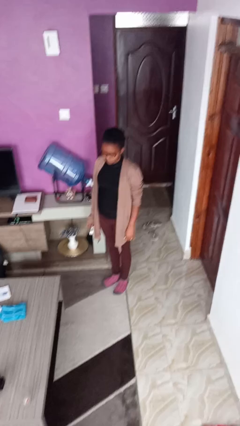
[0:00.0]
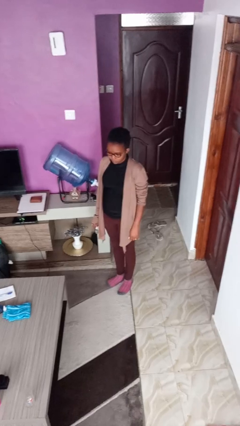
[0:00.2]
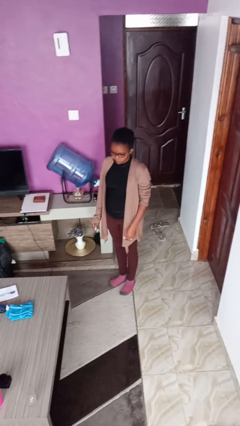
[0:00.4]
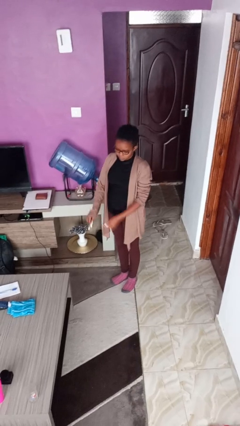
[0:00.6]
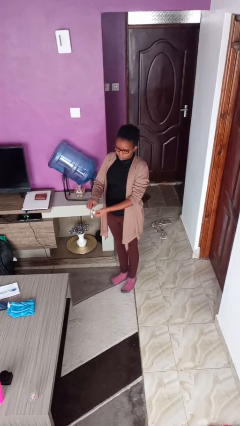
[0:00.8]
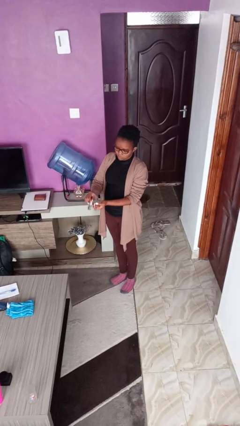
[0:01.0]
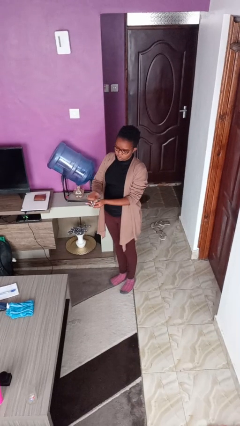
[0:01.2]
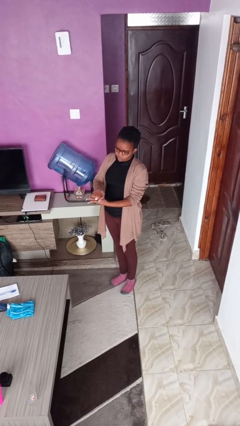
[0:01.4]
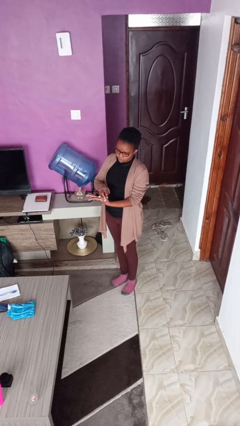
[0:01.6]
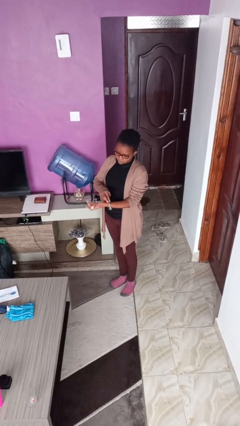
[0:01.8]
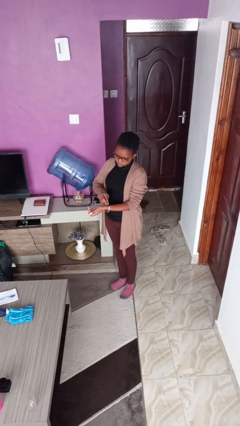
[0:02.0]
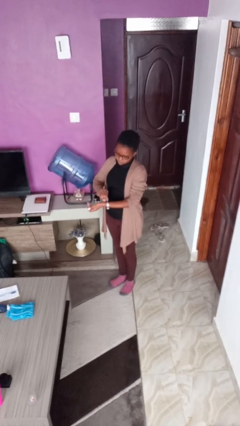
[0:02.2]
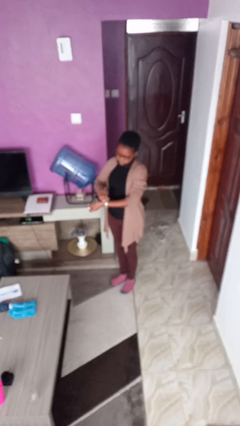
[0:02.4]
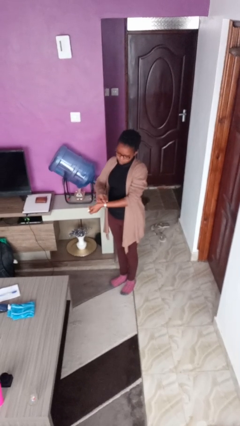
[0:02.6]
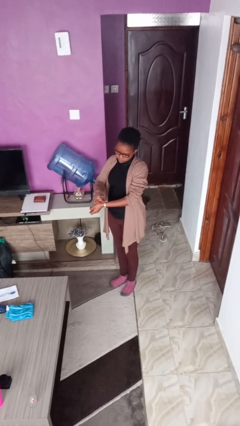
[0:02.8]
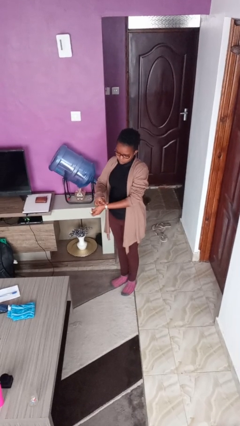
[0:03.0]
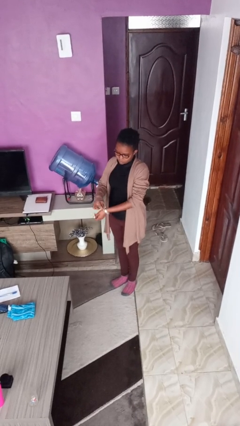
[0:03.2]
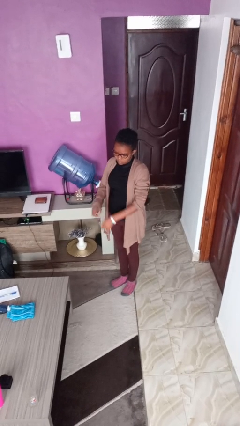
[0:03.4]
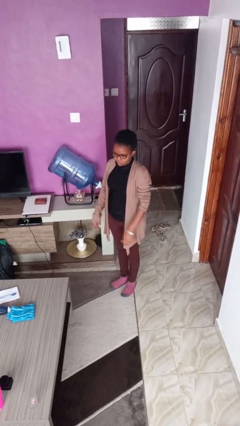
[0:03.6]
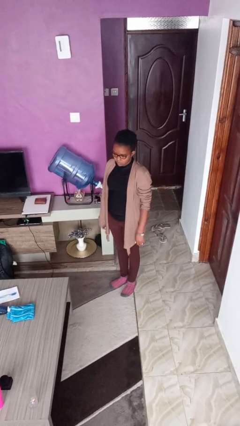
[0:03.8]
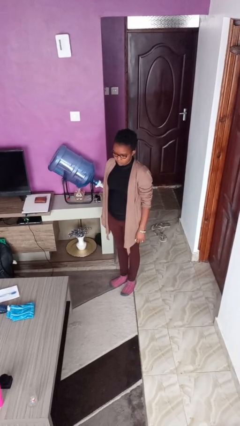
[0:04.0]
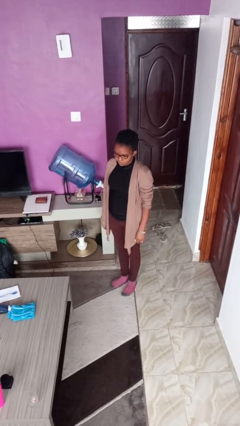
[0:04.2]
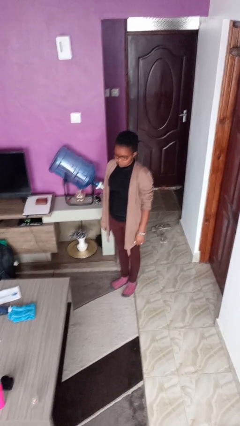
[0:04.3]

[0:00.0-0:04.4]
person puts on wristwatch

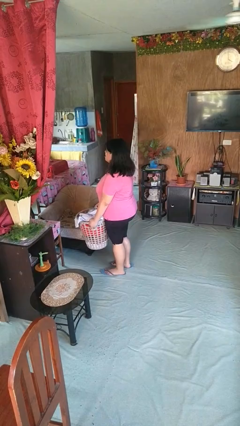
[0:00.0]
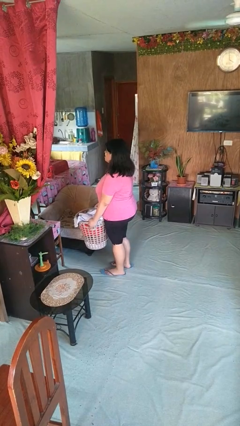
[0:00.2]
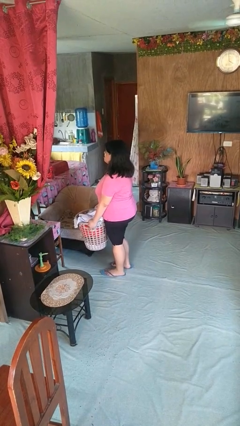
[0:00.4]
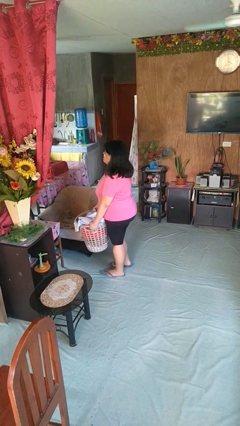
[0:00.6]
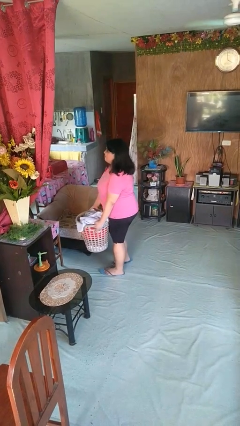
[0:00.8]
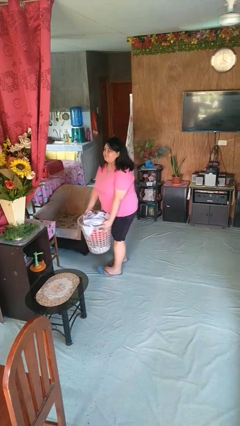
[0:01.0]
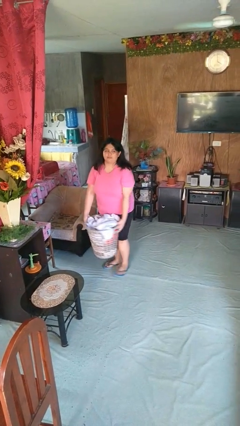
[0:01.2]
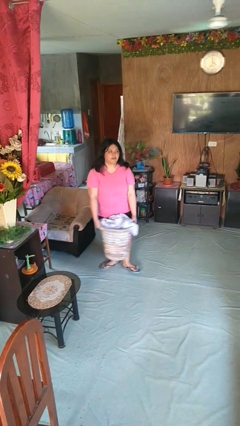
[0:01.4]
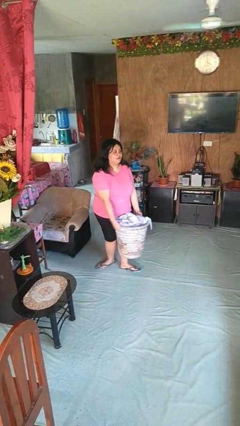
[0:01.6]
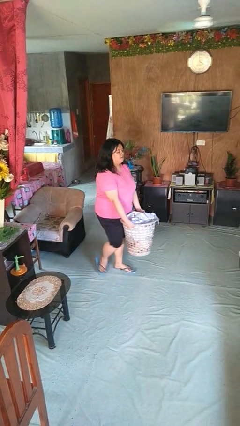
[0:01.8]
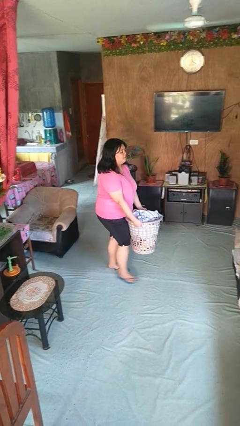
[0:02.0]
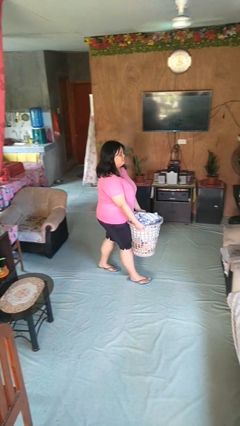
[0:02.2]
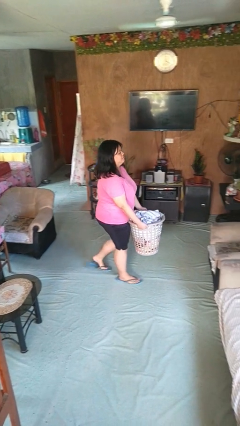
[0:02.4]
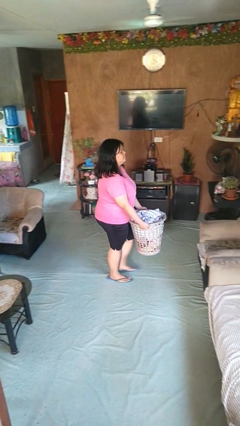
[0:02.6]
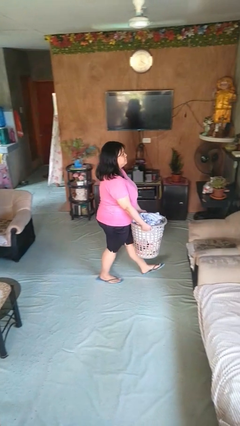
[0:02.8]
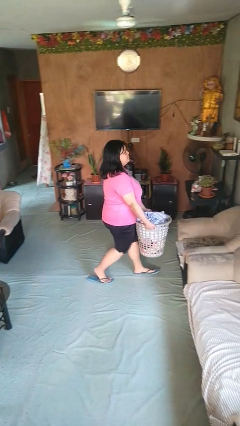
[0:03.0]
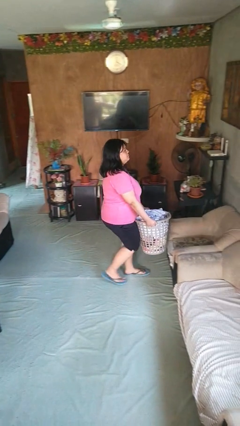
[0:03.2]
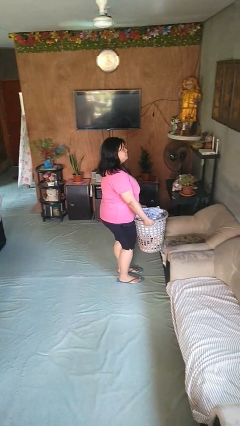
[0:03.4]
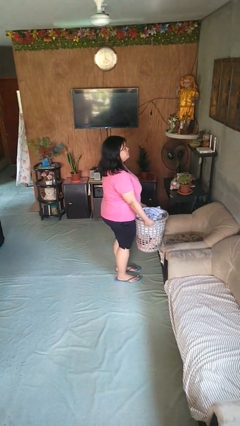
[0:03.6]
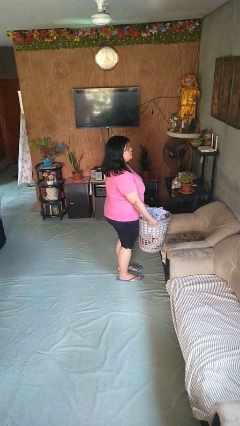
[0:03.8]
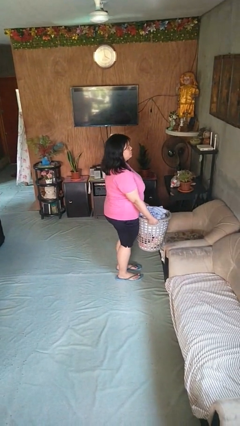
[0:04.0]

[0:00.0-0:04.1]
person carries laundry basket

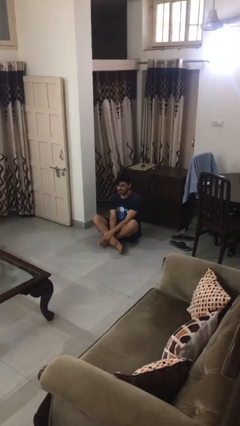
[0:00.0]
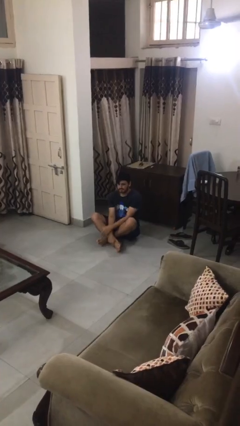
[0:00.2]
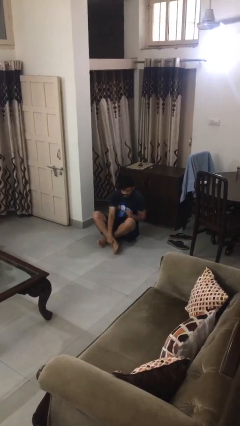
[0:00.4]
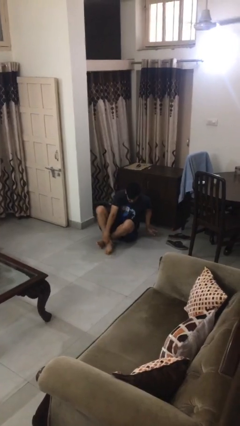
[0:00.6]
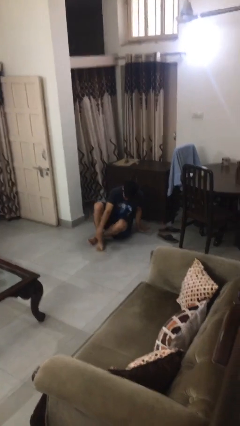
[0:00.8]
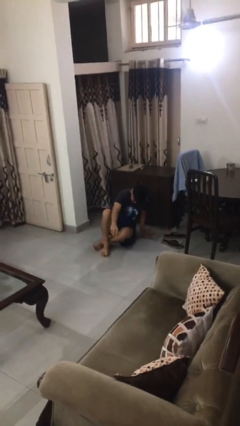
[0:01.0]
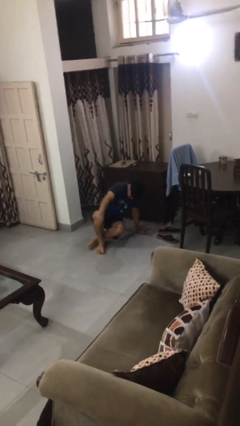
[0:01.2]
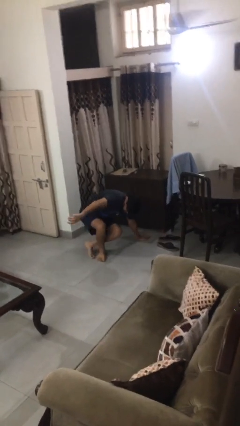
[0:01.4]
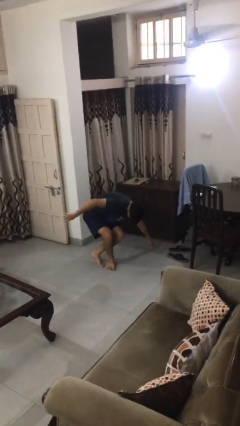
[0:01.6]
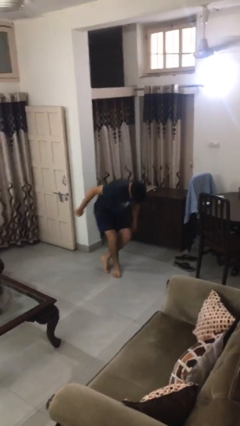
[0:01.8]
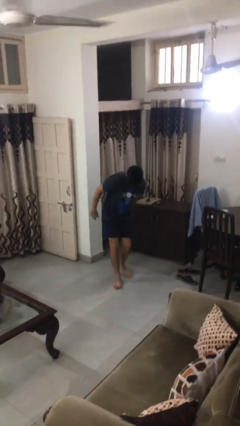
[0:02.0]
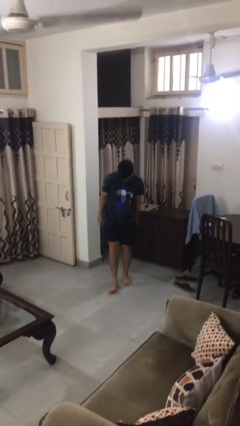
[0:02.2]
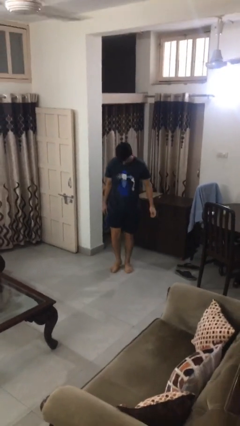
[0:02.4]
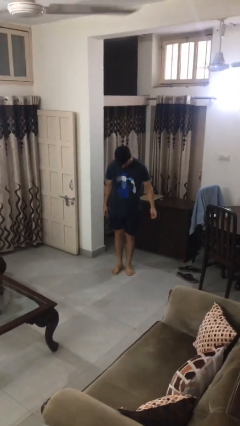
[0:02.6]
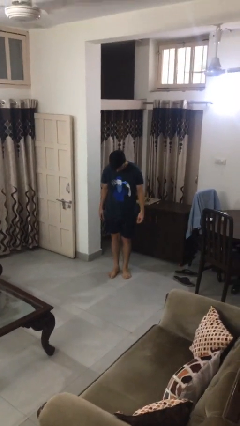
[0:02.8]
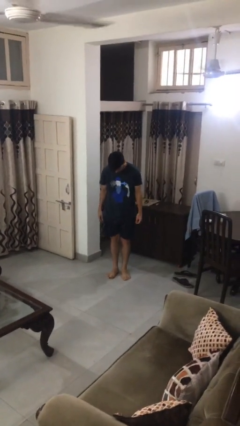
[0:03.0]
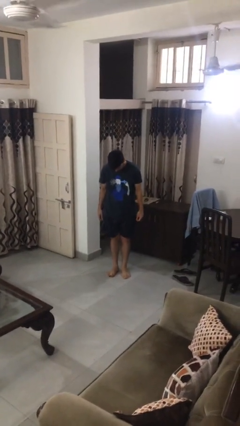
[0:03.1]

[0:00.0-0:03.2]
person stands up from floor

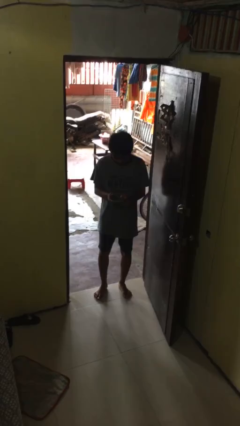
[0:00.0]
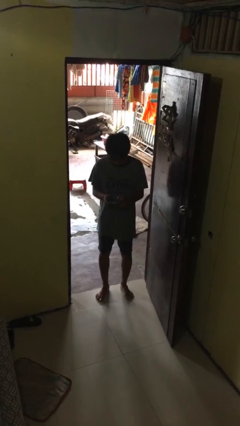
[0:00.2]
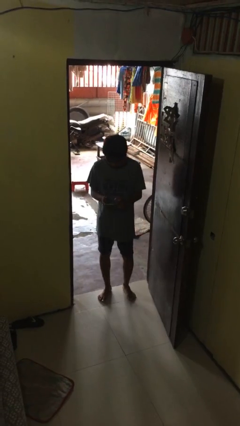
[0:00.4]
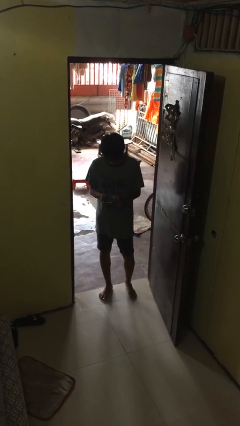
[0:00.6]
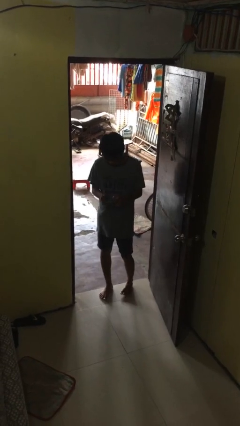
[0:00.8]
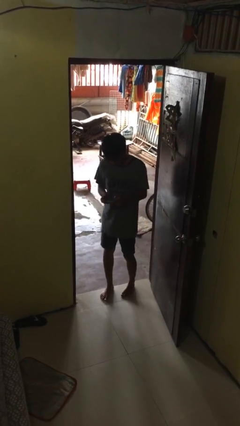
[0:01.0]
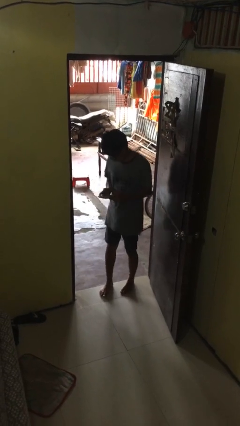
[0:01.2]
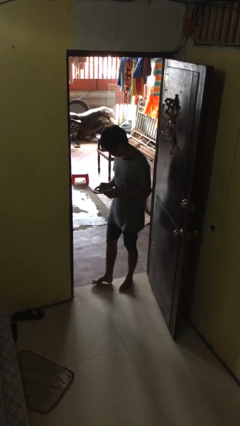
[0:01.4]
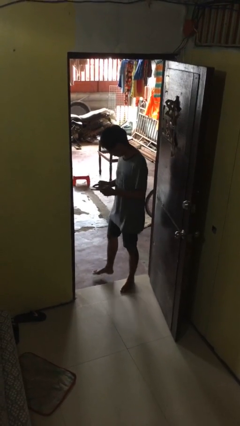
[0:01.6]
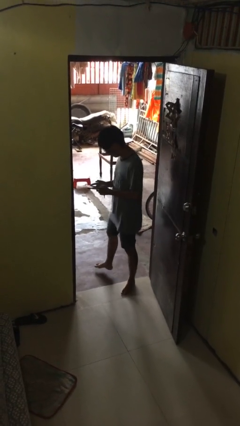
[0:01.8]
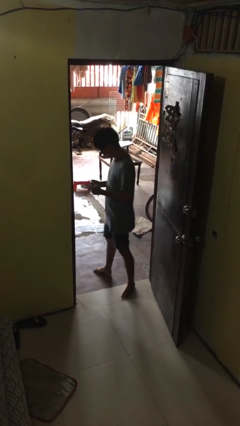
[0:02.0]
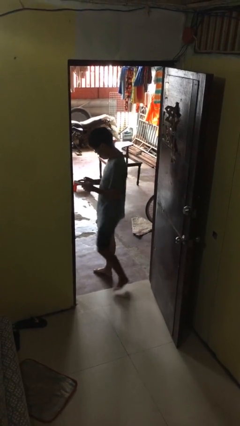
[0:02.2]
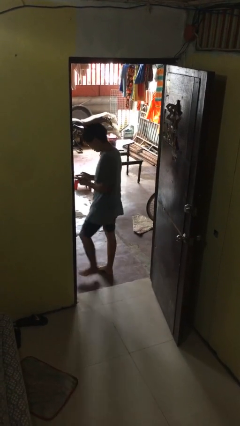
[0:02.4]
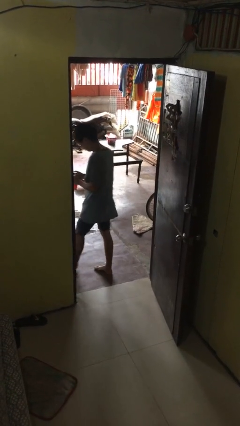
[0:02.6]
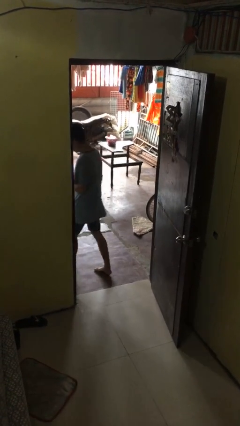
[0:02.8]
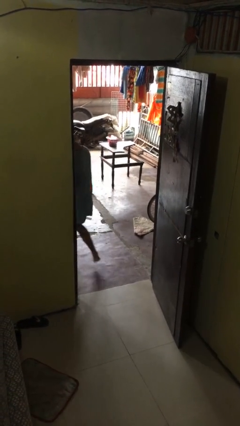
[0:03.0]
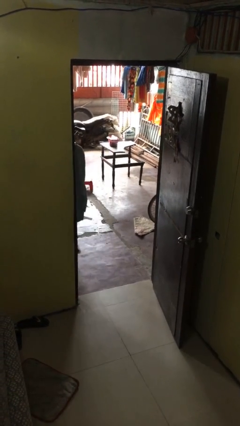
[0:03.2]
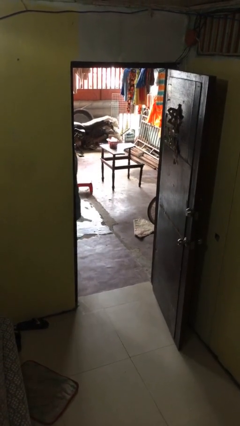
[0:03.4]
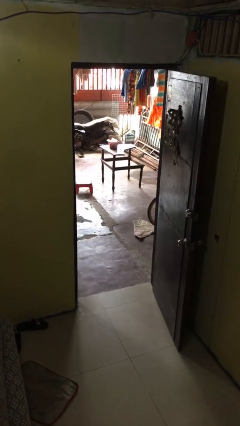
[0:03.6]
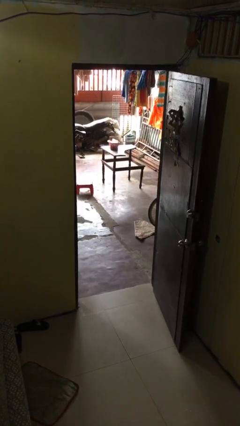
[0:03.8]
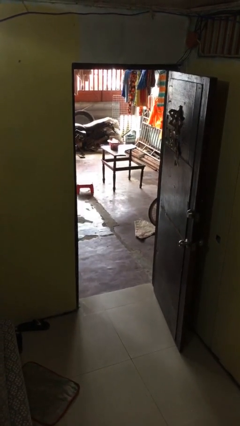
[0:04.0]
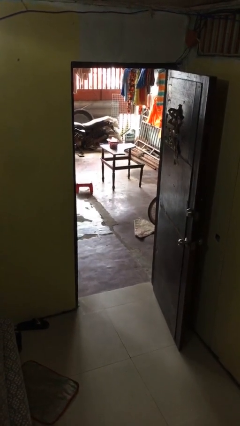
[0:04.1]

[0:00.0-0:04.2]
person exits scene through structure

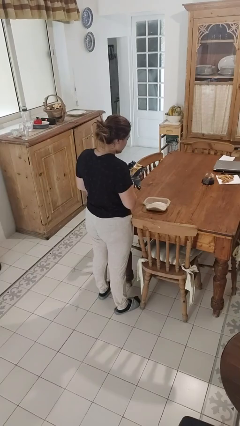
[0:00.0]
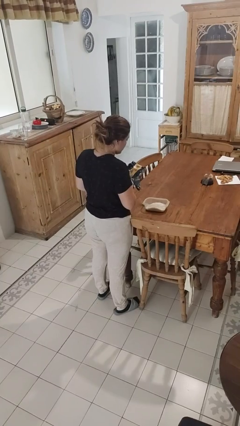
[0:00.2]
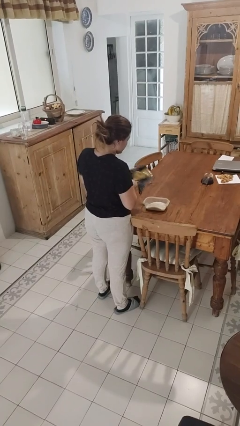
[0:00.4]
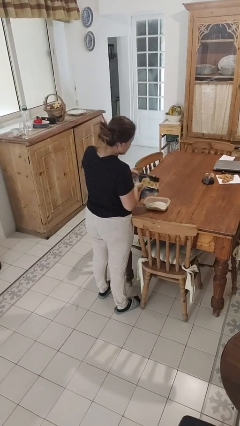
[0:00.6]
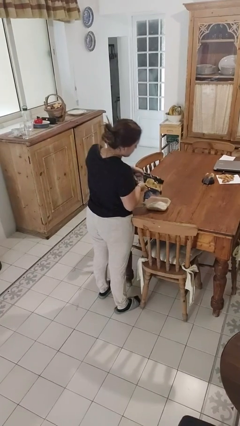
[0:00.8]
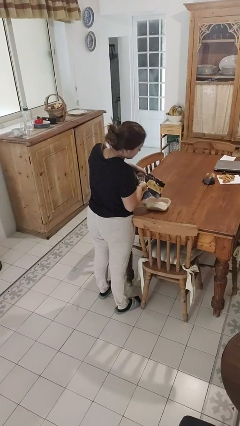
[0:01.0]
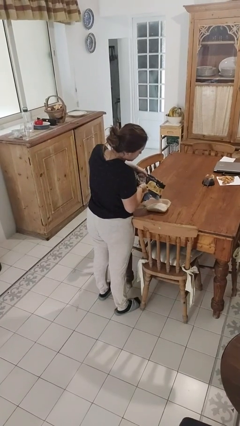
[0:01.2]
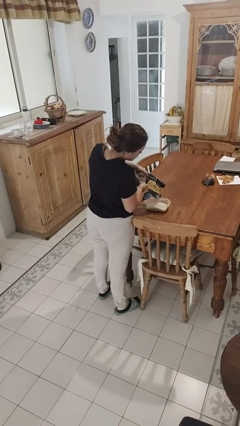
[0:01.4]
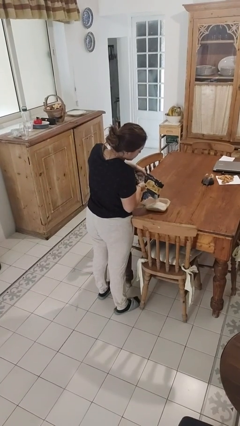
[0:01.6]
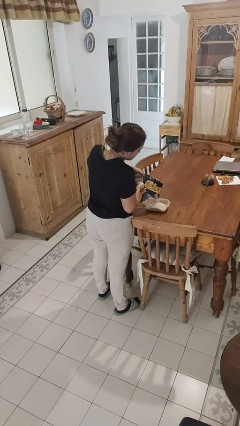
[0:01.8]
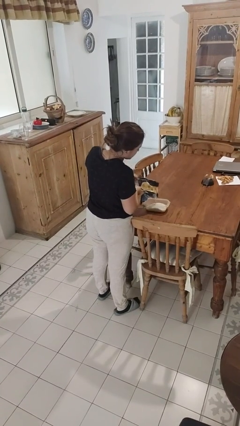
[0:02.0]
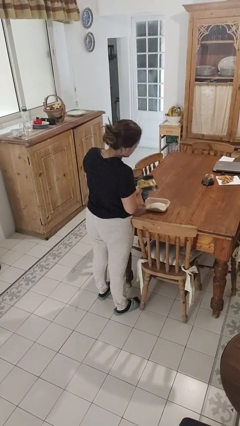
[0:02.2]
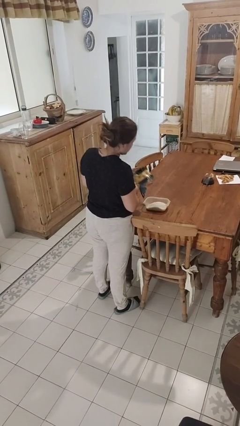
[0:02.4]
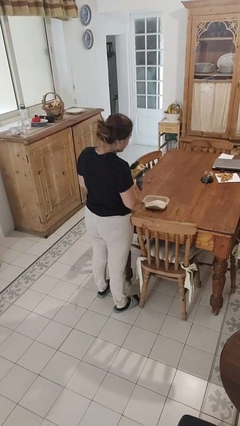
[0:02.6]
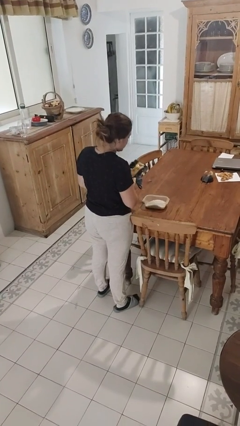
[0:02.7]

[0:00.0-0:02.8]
person pours into bowl
